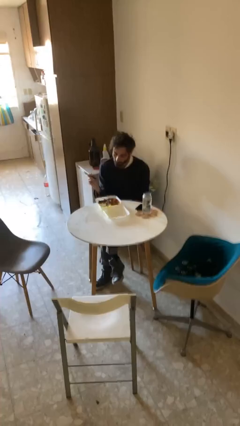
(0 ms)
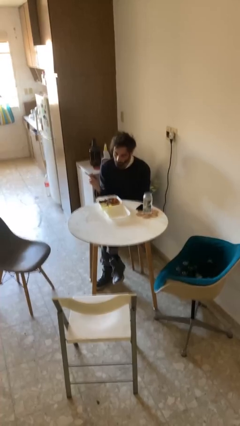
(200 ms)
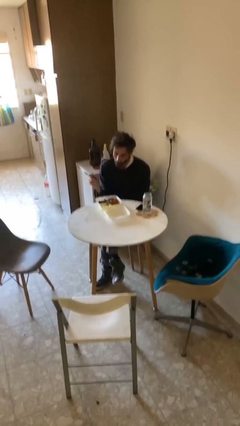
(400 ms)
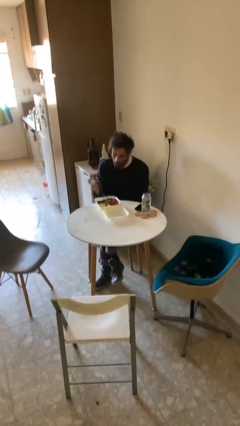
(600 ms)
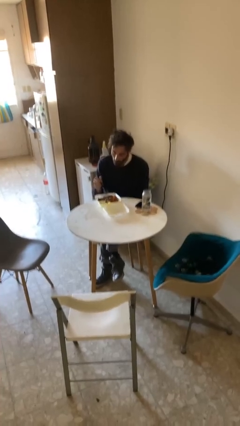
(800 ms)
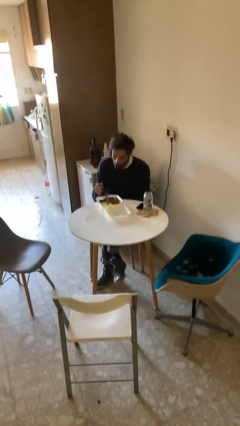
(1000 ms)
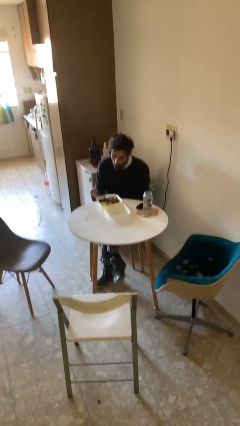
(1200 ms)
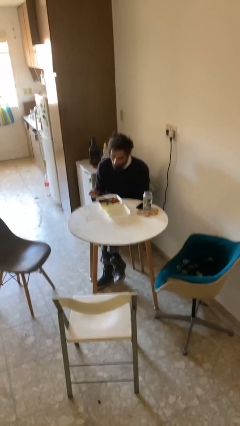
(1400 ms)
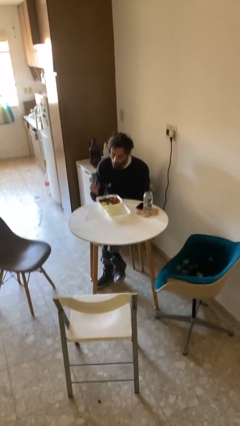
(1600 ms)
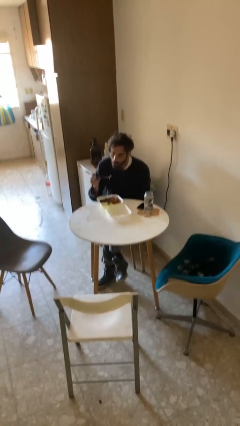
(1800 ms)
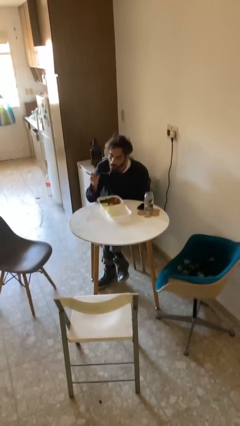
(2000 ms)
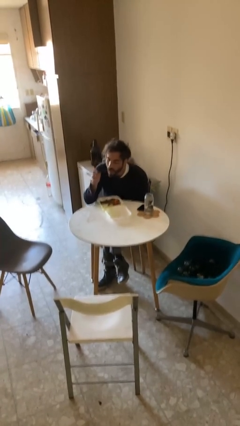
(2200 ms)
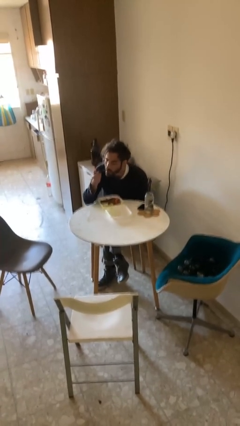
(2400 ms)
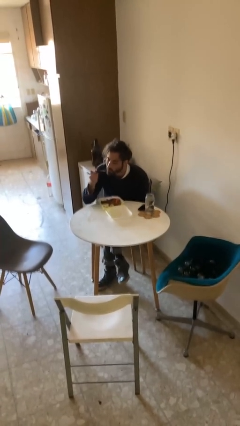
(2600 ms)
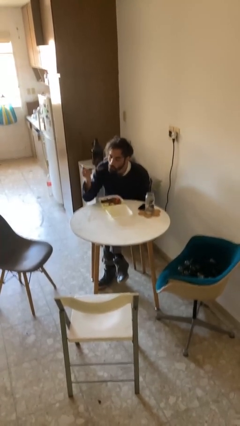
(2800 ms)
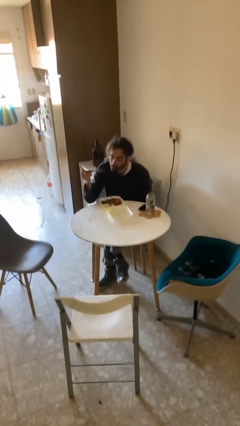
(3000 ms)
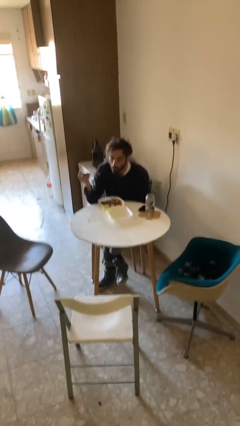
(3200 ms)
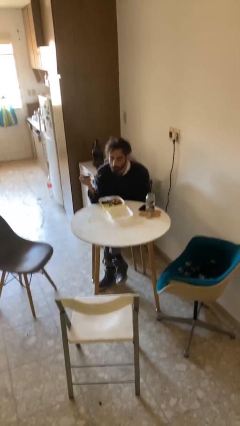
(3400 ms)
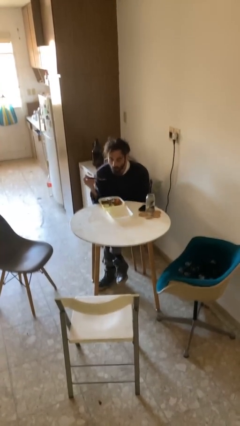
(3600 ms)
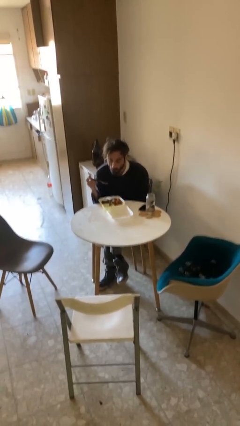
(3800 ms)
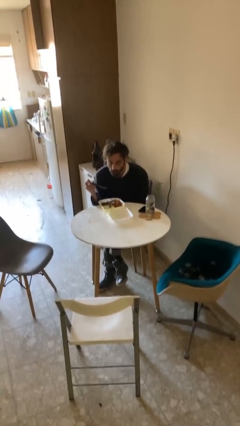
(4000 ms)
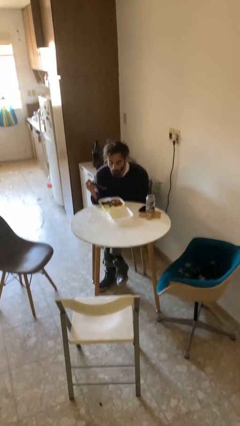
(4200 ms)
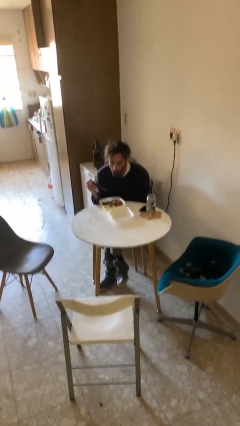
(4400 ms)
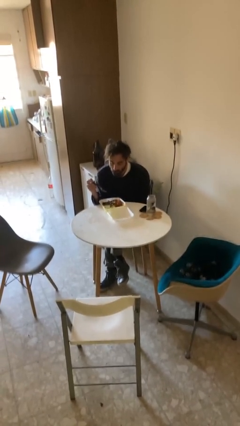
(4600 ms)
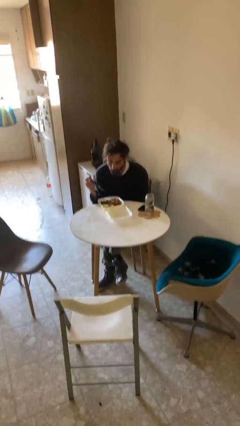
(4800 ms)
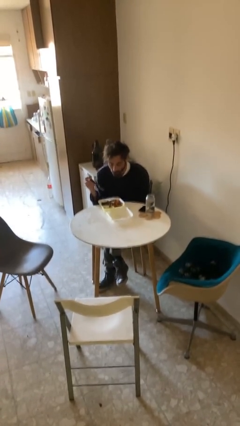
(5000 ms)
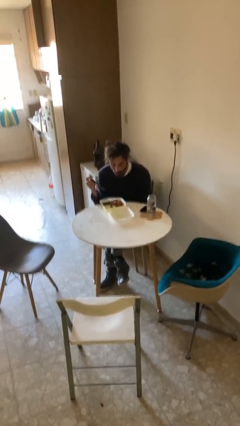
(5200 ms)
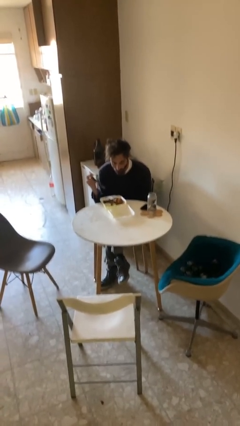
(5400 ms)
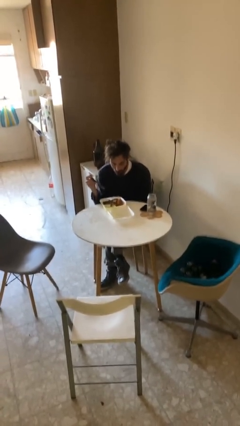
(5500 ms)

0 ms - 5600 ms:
person eats with utensil

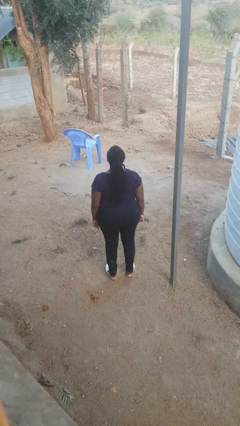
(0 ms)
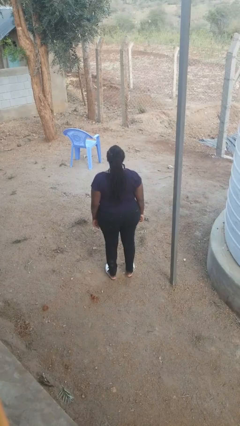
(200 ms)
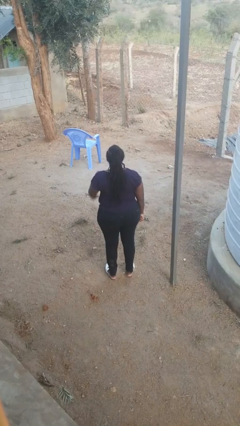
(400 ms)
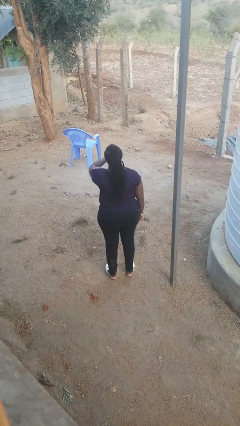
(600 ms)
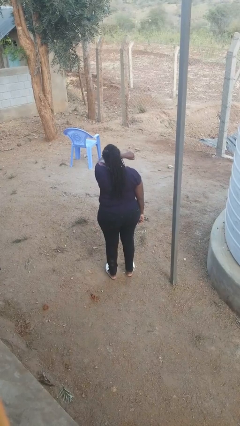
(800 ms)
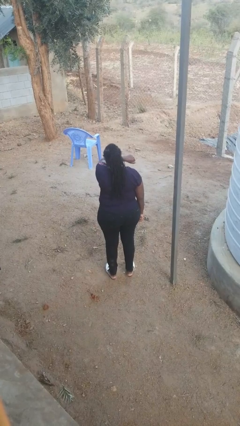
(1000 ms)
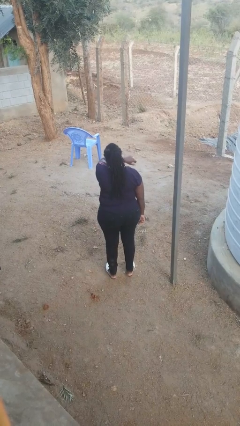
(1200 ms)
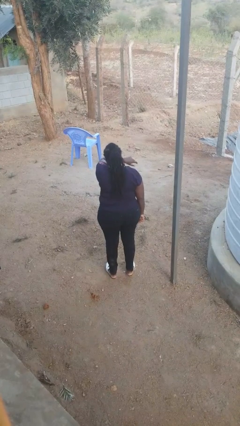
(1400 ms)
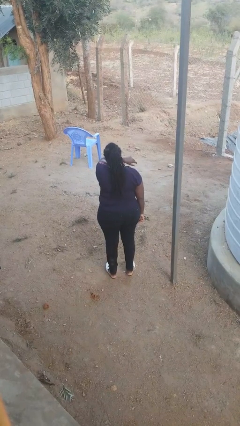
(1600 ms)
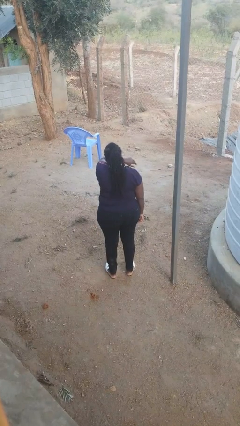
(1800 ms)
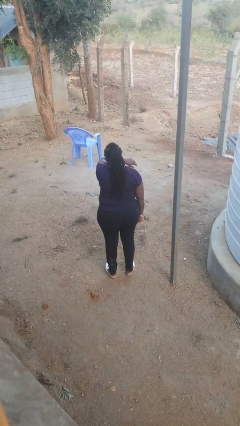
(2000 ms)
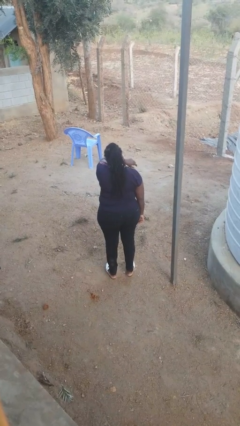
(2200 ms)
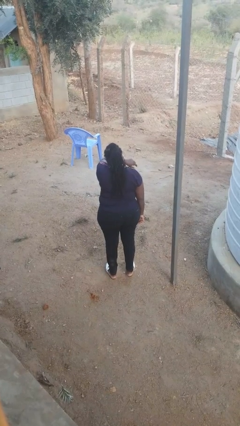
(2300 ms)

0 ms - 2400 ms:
person sneezes into arm

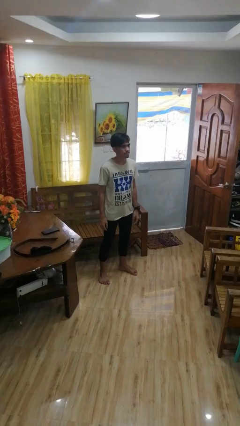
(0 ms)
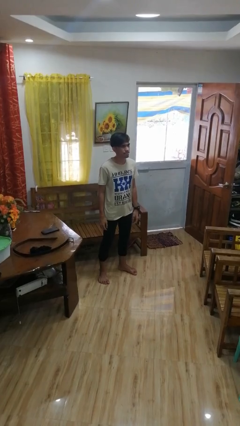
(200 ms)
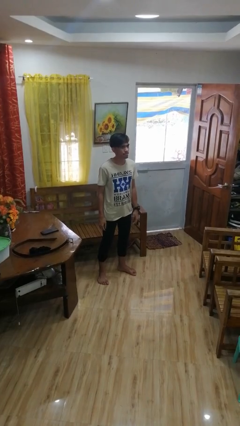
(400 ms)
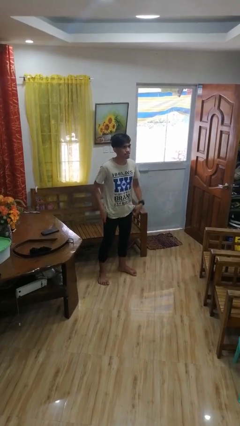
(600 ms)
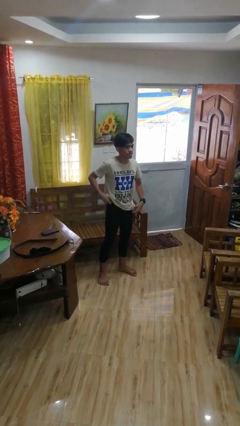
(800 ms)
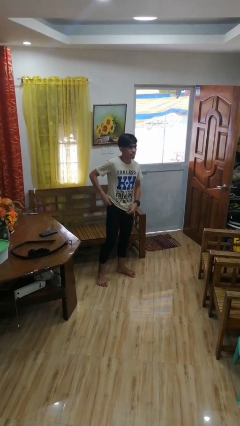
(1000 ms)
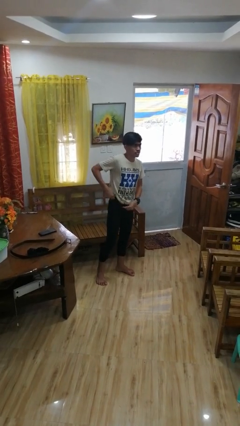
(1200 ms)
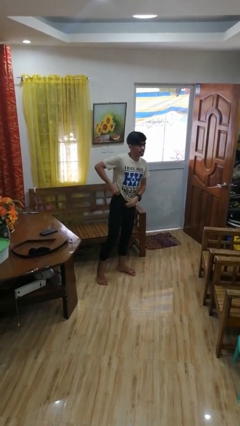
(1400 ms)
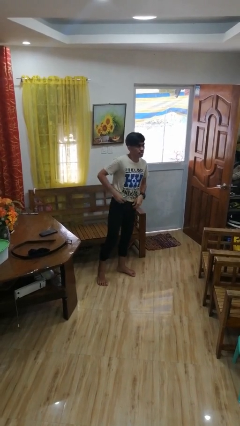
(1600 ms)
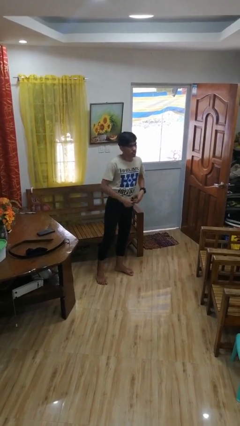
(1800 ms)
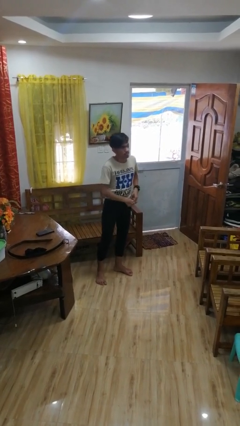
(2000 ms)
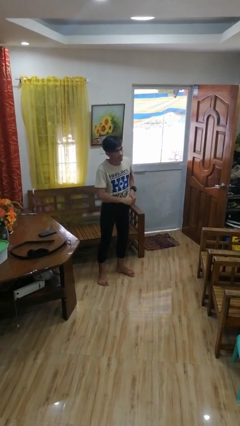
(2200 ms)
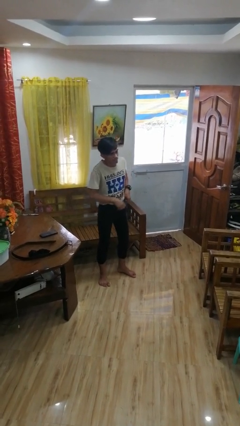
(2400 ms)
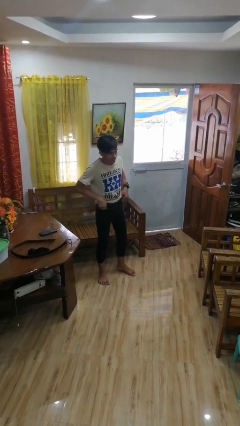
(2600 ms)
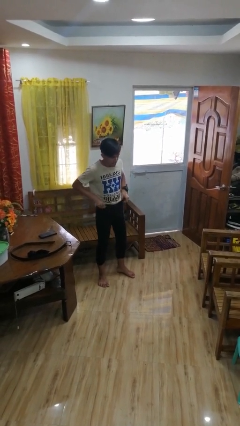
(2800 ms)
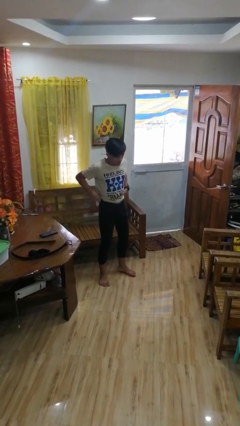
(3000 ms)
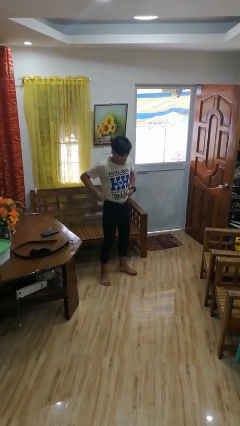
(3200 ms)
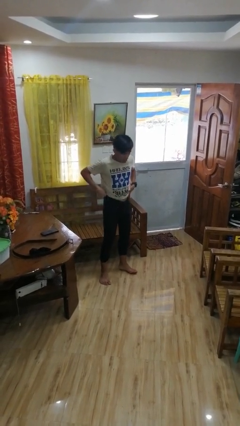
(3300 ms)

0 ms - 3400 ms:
person hikes up pants

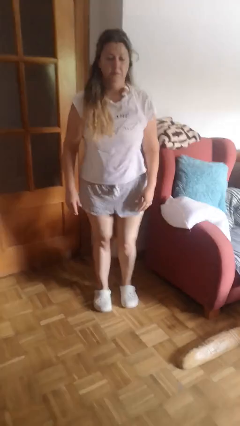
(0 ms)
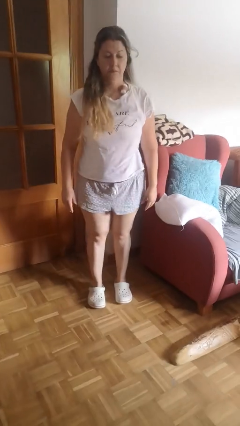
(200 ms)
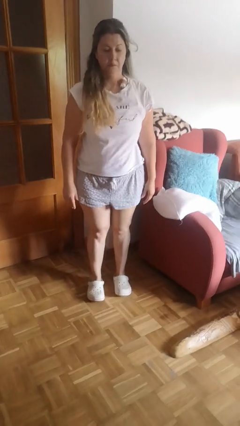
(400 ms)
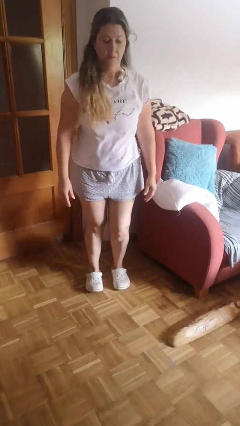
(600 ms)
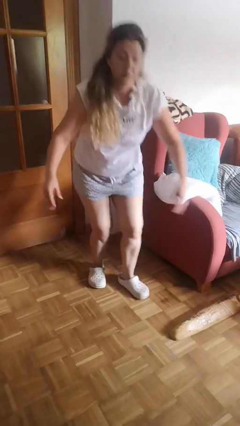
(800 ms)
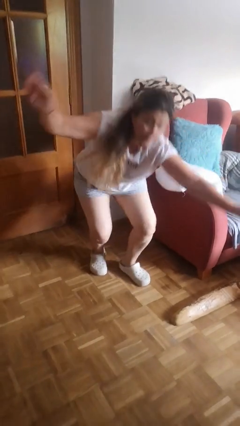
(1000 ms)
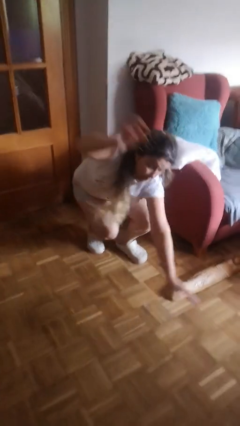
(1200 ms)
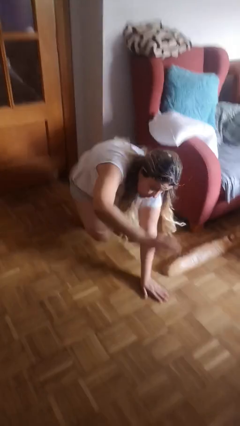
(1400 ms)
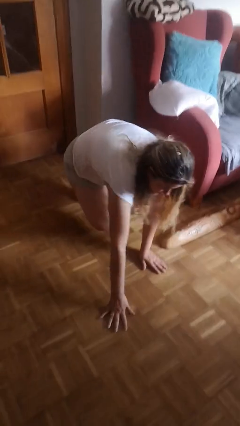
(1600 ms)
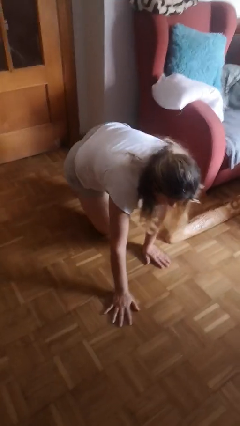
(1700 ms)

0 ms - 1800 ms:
person trips on object on floor

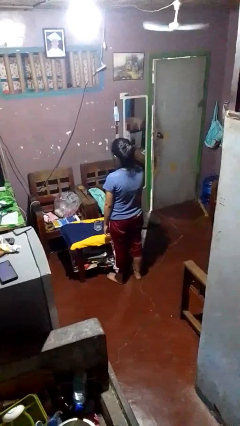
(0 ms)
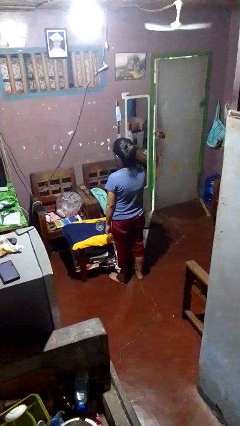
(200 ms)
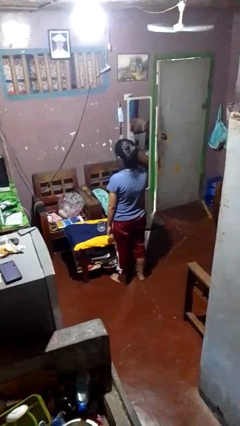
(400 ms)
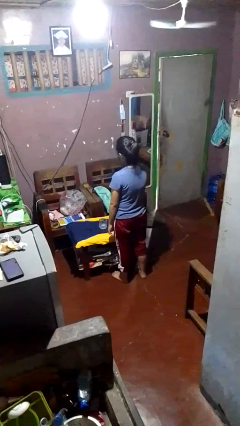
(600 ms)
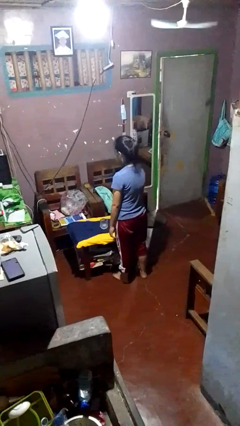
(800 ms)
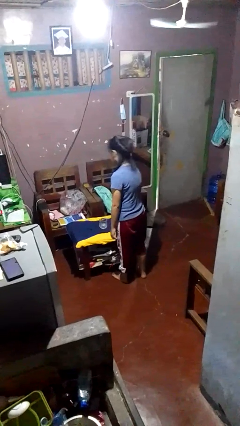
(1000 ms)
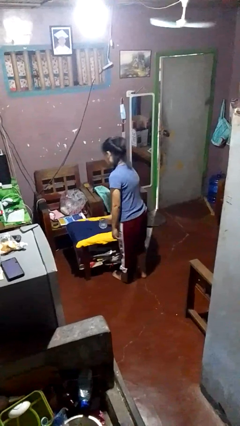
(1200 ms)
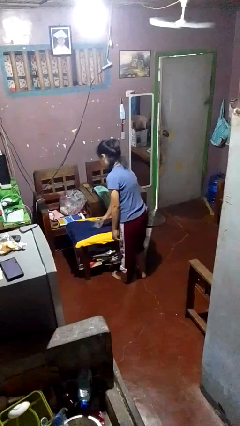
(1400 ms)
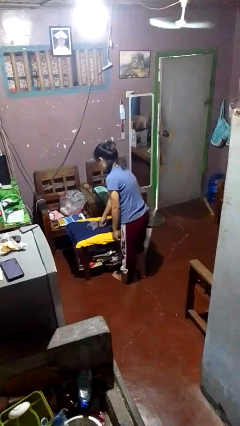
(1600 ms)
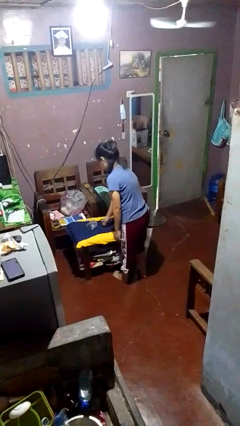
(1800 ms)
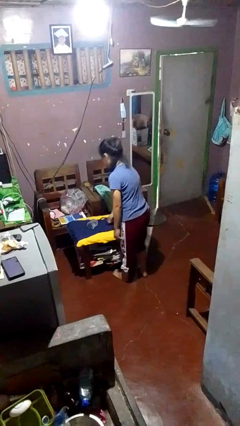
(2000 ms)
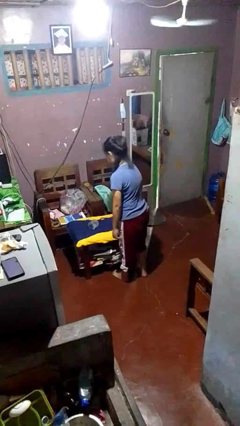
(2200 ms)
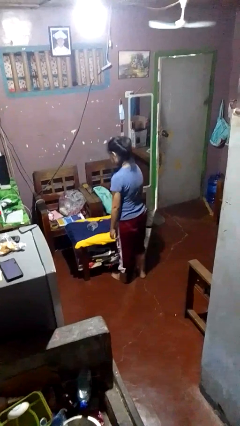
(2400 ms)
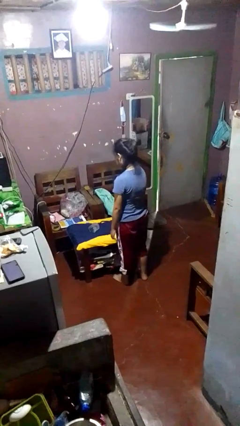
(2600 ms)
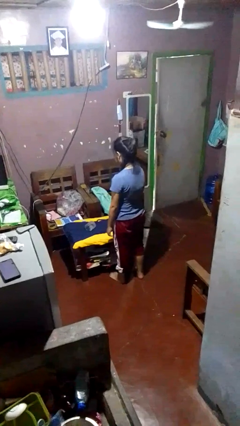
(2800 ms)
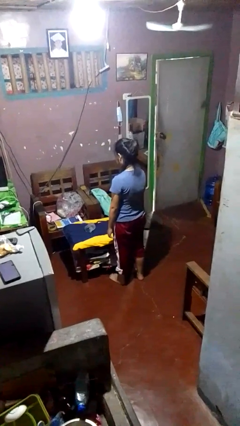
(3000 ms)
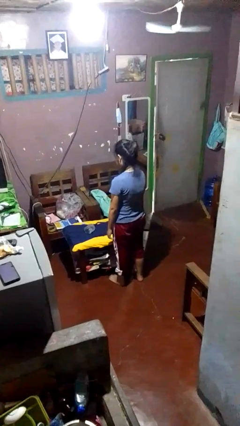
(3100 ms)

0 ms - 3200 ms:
person knocks over glass

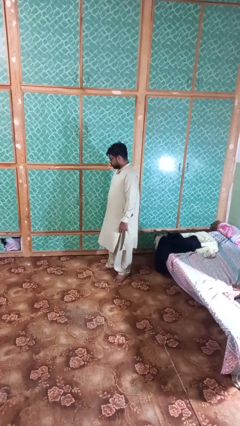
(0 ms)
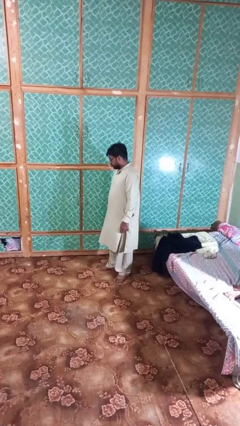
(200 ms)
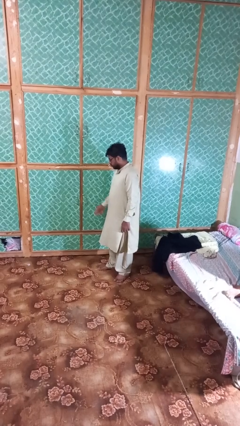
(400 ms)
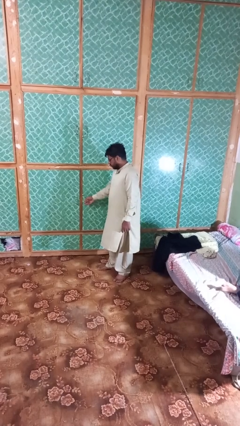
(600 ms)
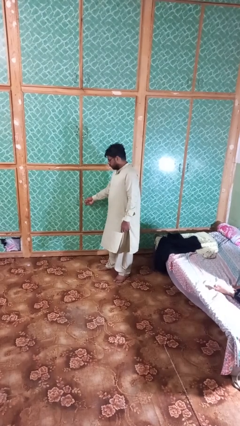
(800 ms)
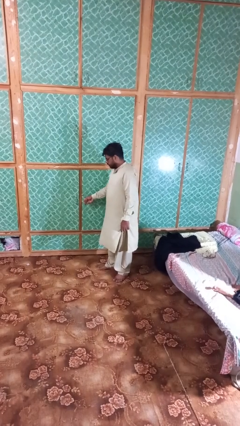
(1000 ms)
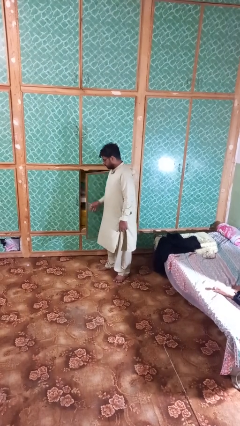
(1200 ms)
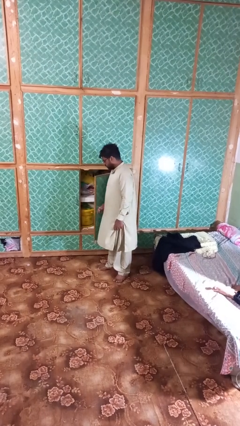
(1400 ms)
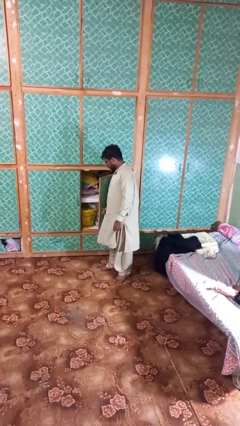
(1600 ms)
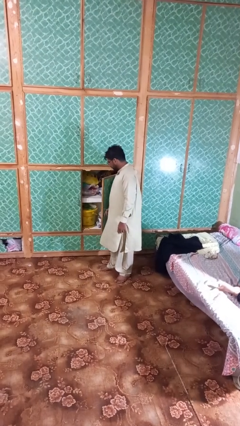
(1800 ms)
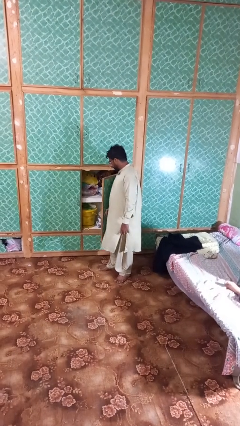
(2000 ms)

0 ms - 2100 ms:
person opens closet door
